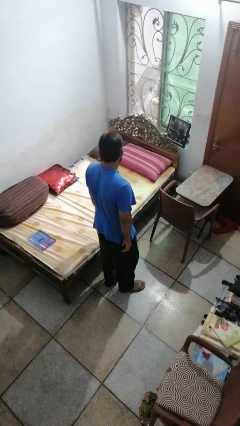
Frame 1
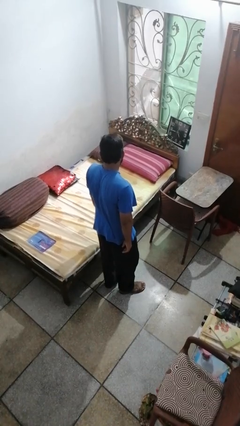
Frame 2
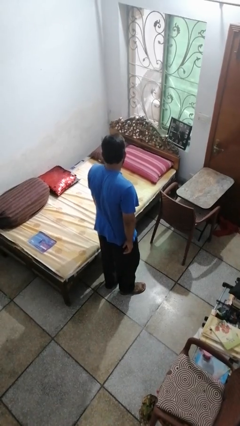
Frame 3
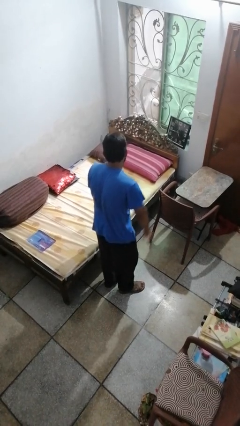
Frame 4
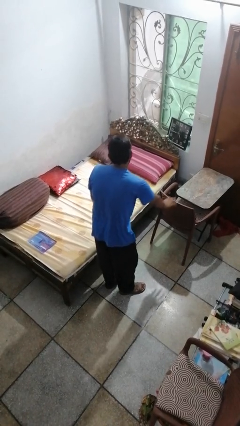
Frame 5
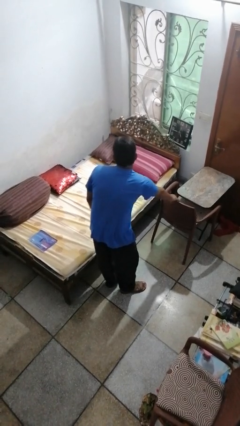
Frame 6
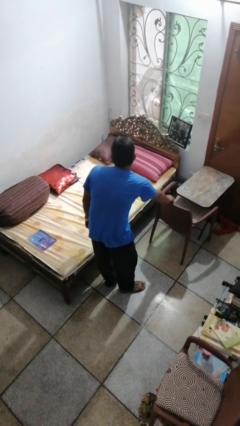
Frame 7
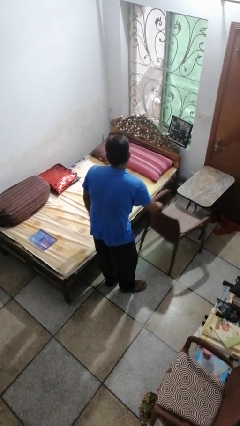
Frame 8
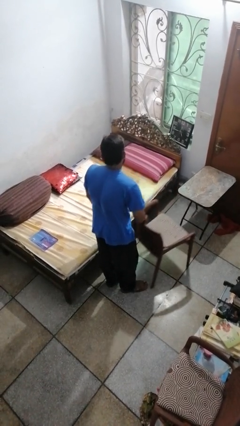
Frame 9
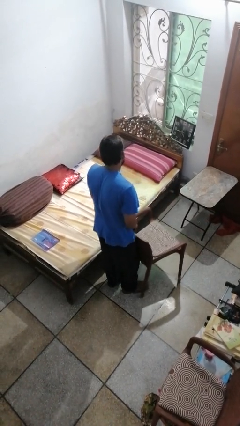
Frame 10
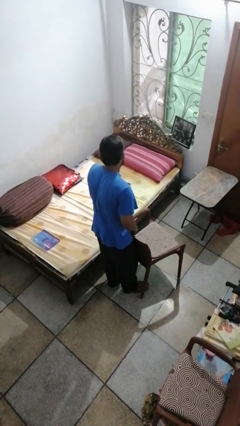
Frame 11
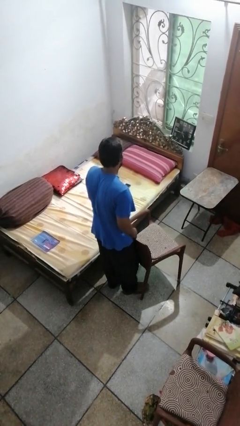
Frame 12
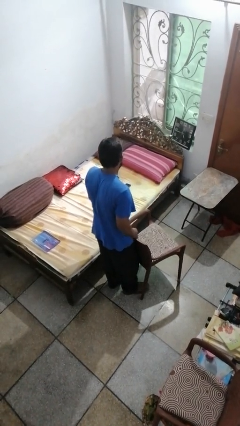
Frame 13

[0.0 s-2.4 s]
person pulls out chair

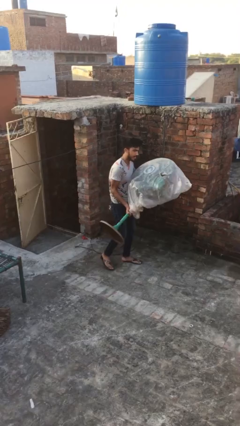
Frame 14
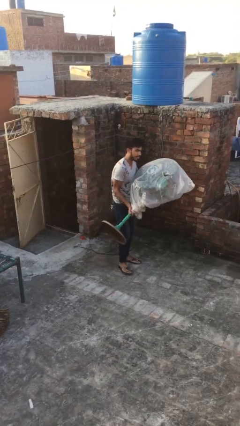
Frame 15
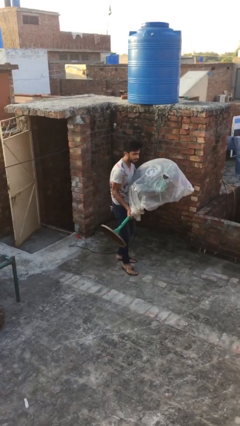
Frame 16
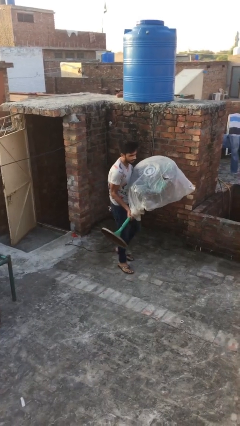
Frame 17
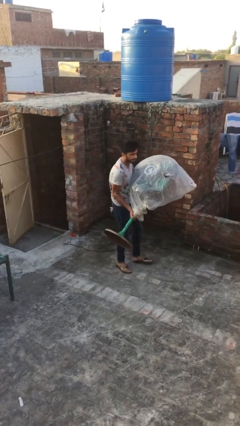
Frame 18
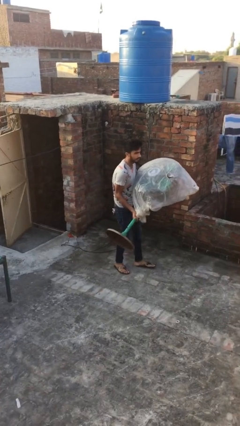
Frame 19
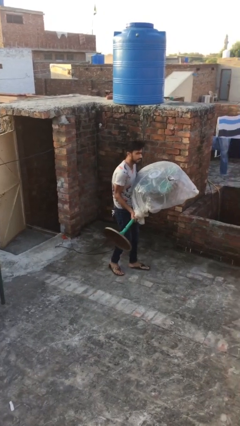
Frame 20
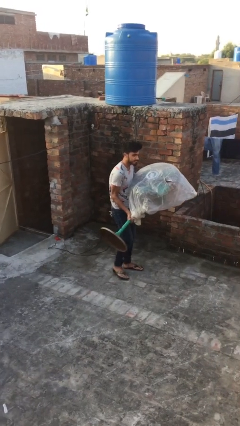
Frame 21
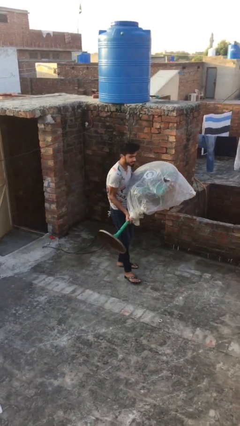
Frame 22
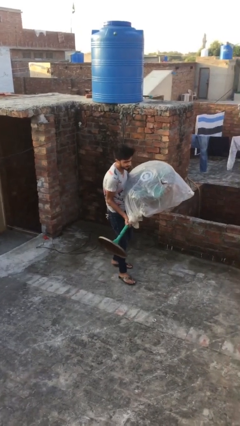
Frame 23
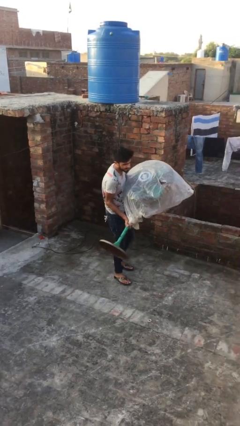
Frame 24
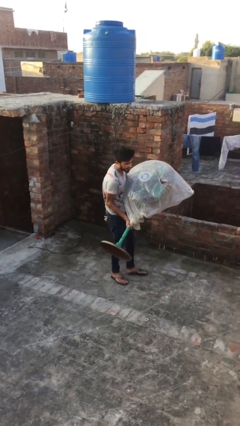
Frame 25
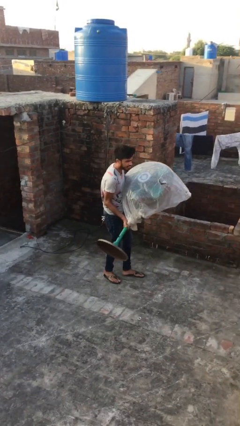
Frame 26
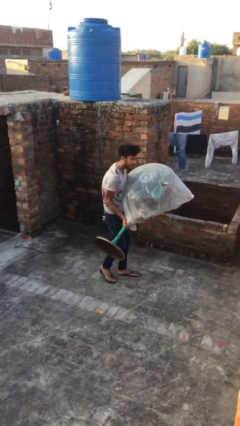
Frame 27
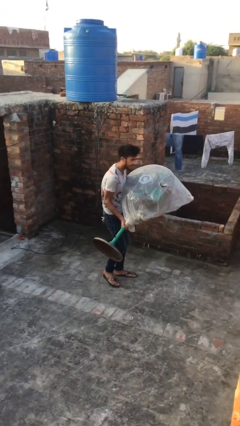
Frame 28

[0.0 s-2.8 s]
person carries heavy object

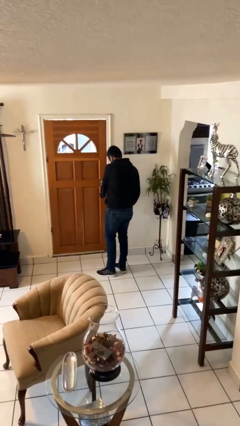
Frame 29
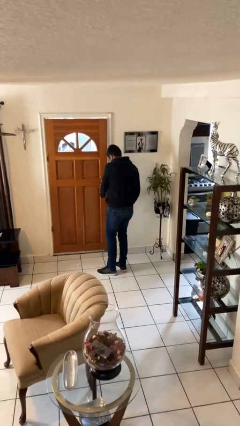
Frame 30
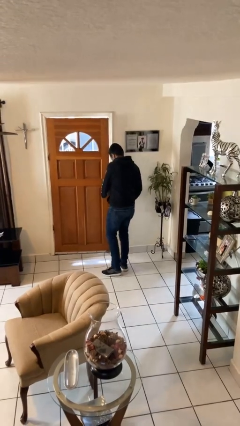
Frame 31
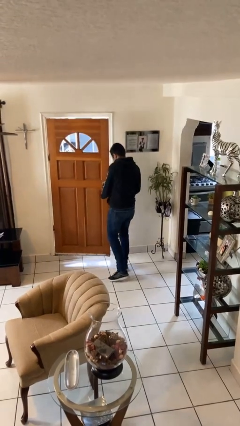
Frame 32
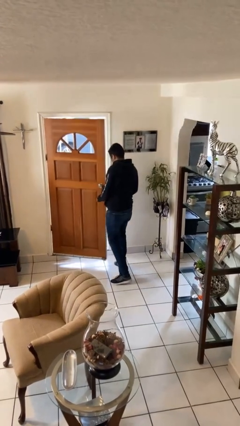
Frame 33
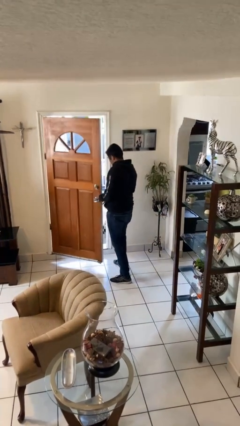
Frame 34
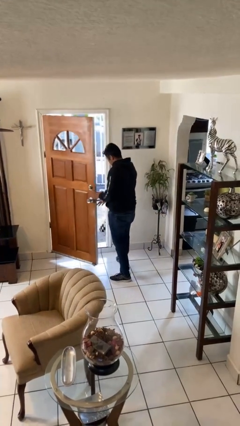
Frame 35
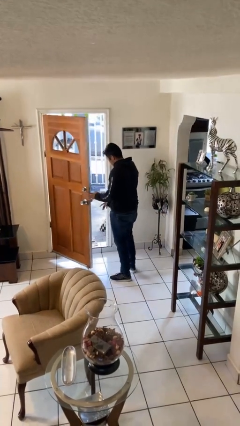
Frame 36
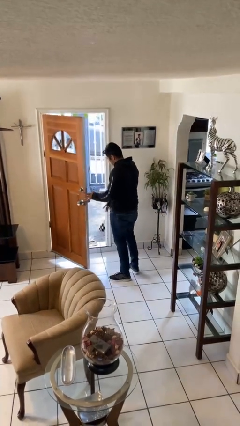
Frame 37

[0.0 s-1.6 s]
person opens facility door

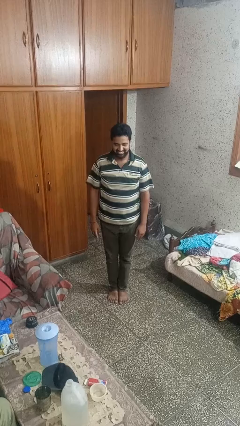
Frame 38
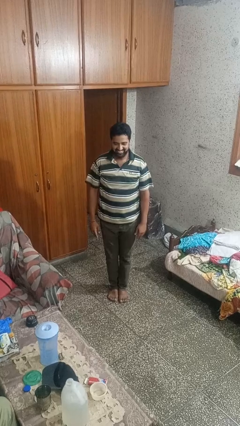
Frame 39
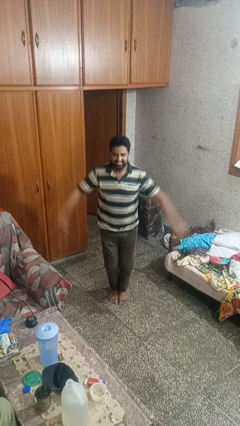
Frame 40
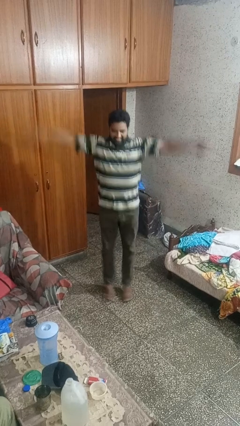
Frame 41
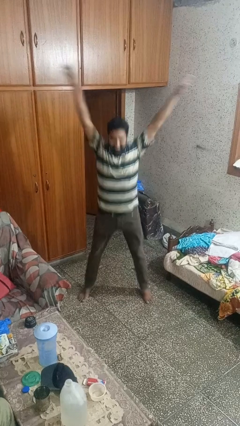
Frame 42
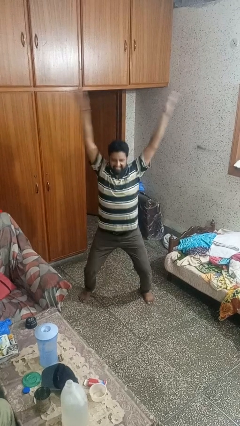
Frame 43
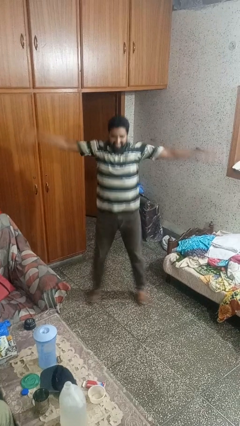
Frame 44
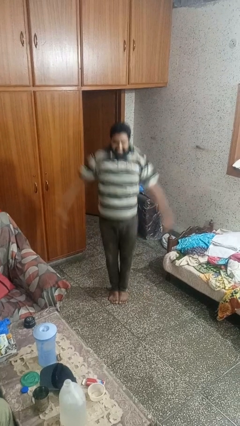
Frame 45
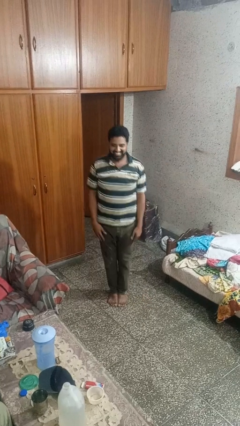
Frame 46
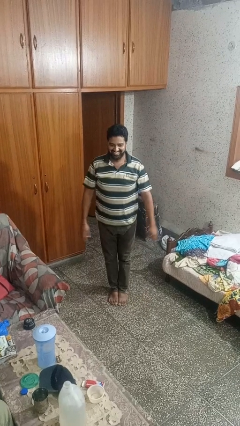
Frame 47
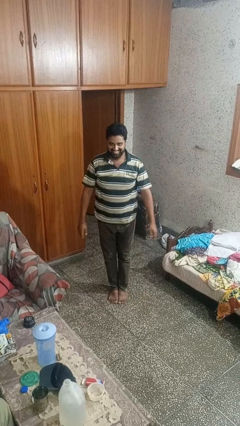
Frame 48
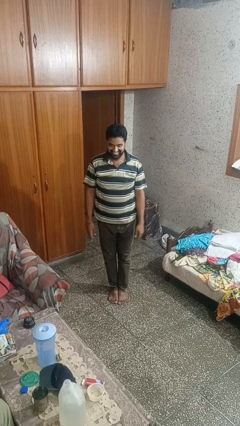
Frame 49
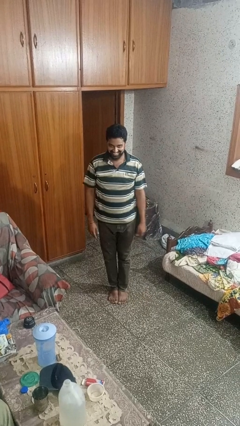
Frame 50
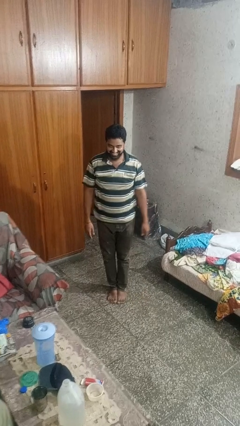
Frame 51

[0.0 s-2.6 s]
person exercises with jumping jacks

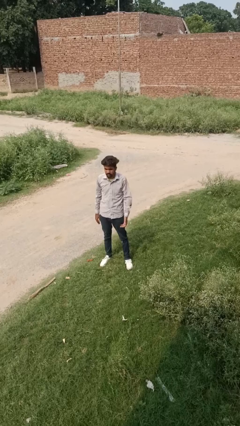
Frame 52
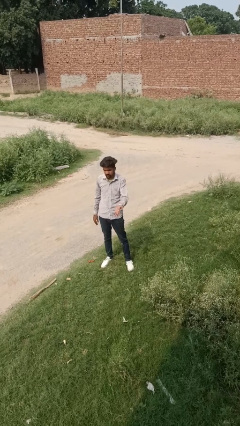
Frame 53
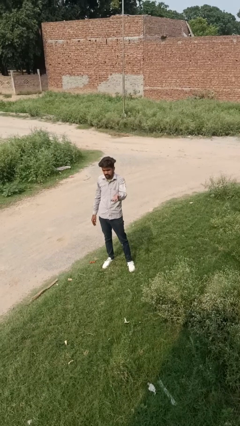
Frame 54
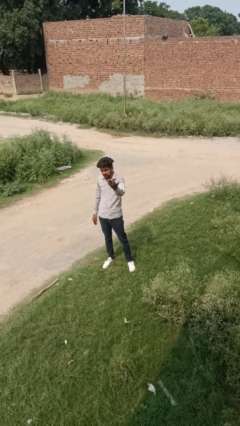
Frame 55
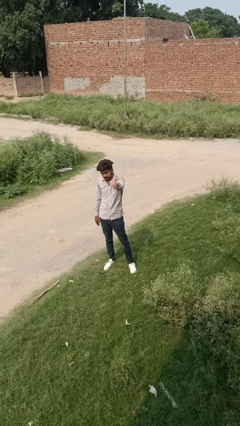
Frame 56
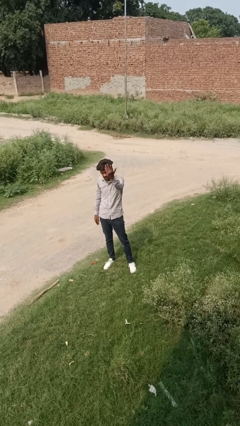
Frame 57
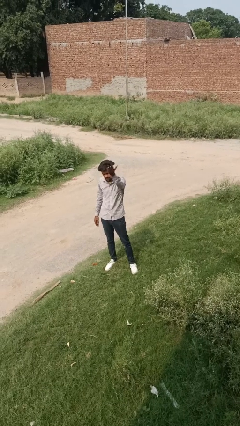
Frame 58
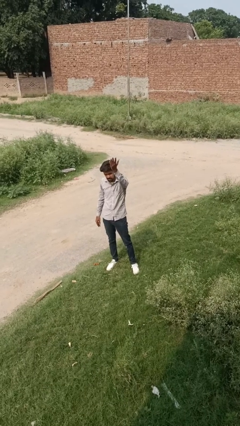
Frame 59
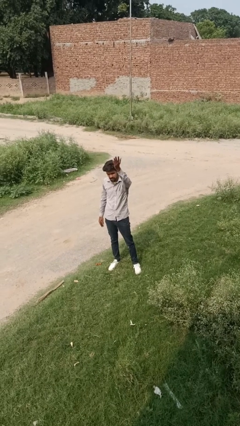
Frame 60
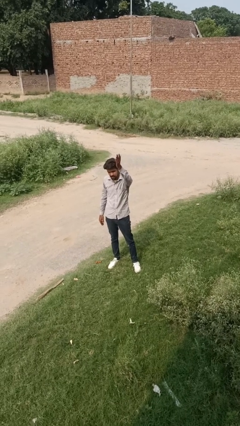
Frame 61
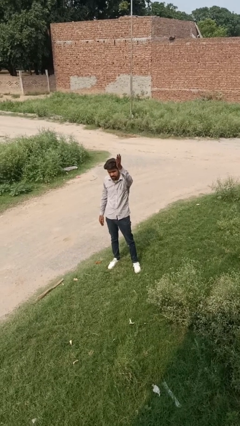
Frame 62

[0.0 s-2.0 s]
person gestures swipe up

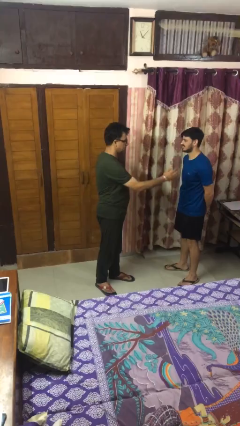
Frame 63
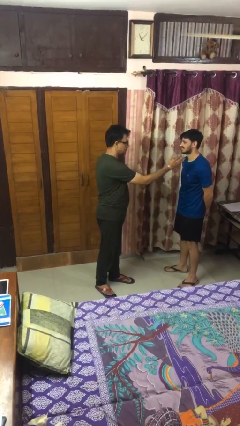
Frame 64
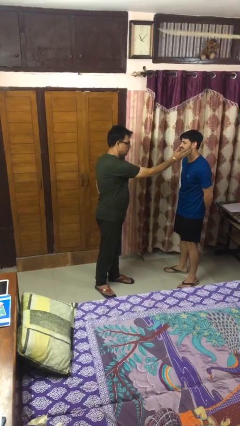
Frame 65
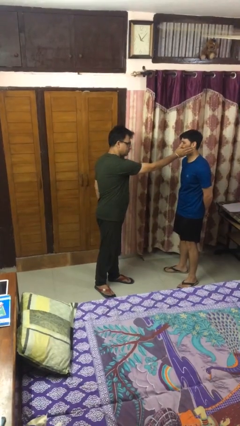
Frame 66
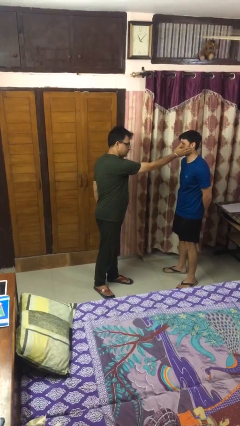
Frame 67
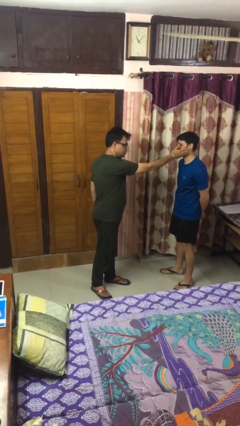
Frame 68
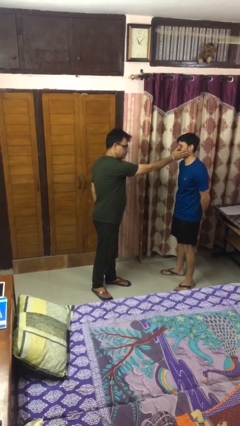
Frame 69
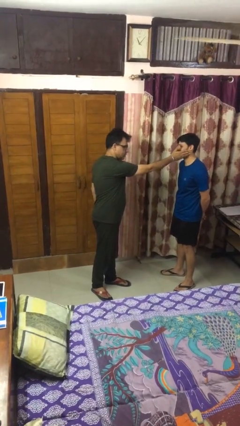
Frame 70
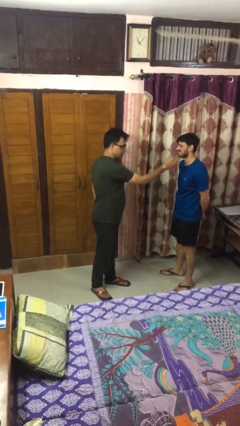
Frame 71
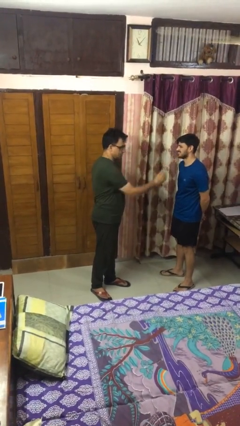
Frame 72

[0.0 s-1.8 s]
person touches face of person

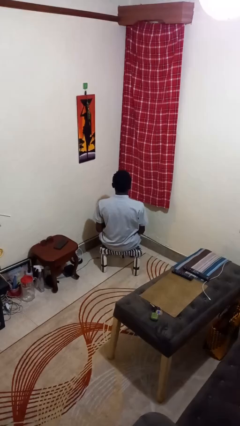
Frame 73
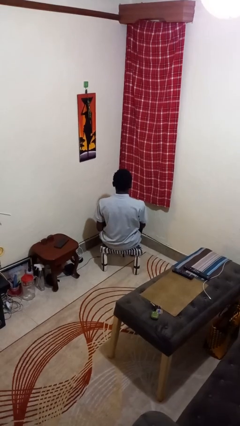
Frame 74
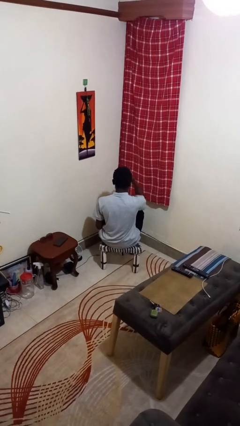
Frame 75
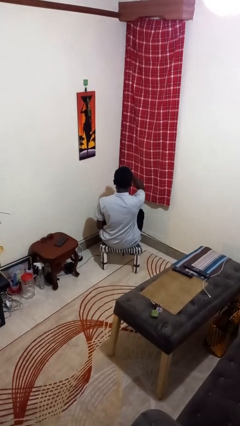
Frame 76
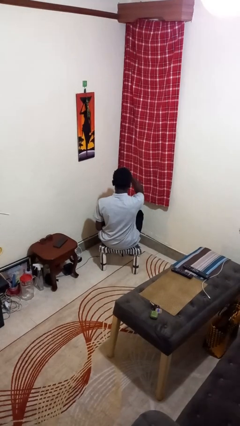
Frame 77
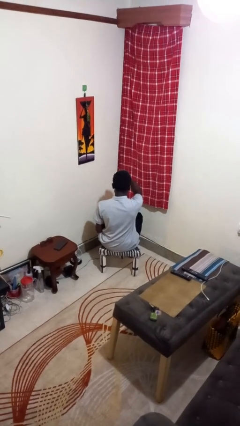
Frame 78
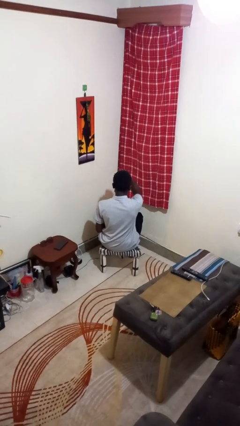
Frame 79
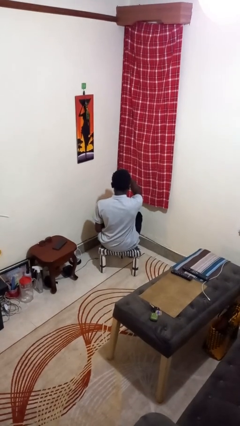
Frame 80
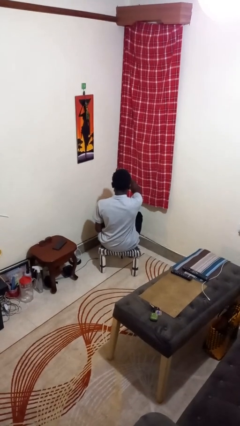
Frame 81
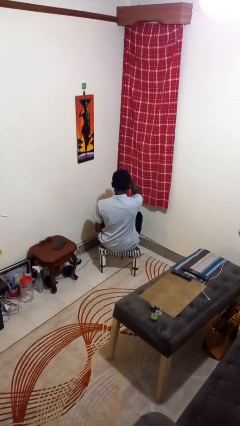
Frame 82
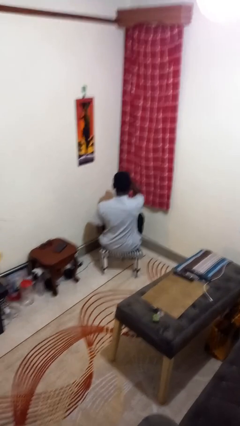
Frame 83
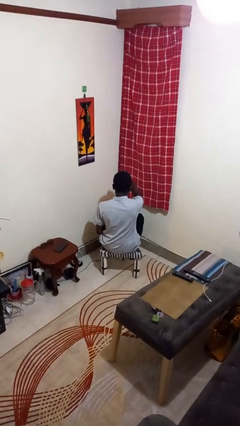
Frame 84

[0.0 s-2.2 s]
person scratches face

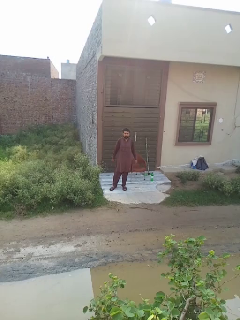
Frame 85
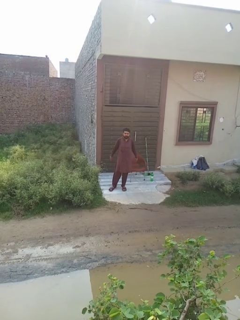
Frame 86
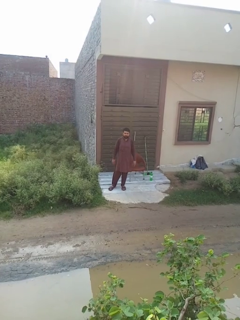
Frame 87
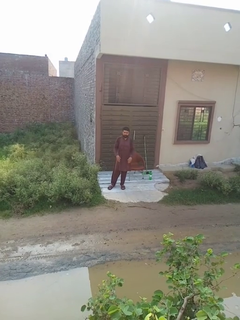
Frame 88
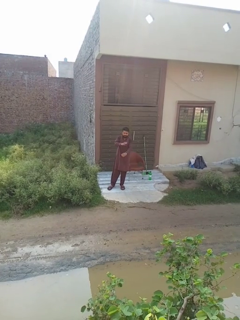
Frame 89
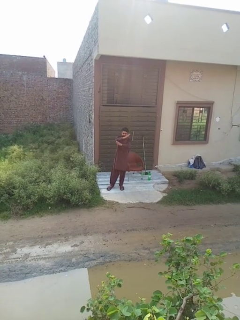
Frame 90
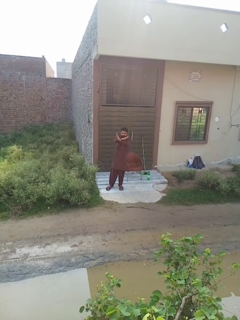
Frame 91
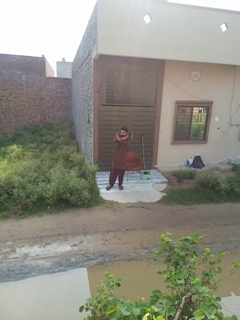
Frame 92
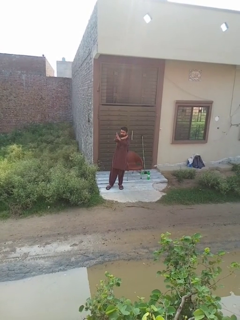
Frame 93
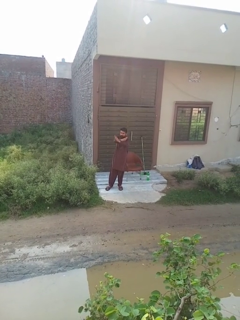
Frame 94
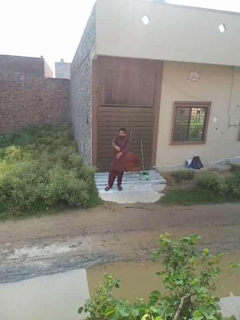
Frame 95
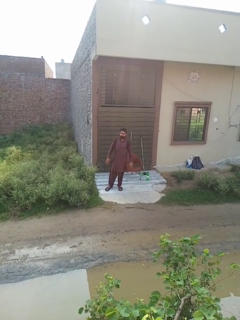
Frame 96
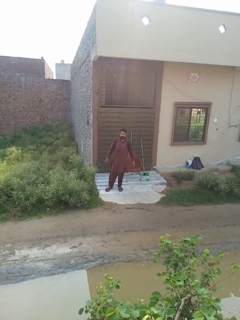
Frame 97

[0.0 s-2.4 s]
person crosses arms
